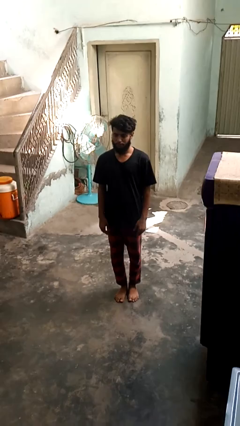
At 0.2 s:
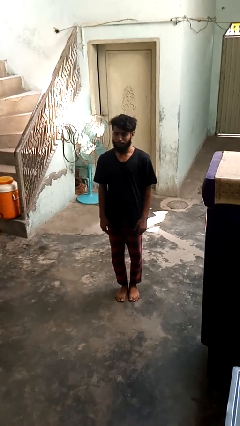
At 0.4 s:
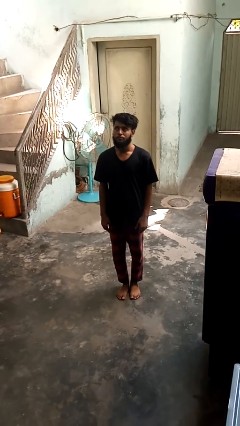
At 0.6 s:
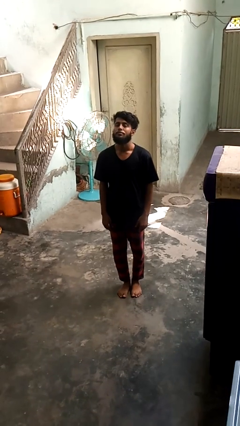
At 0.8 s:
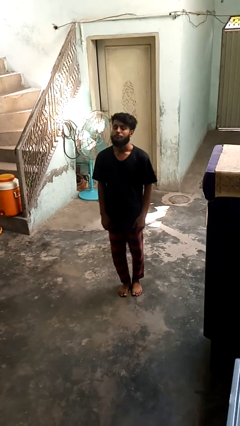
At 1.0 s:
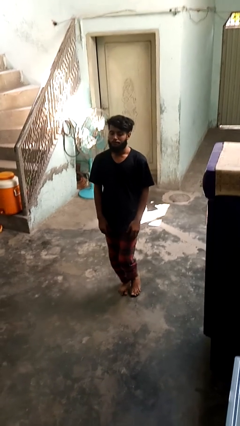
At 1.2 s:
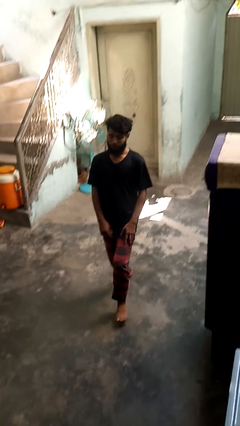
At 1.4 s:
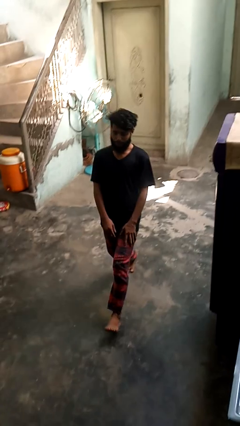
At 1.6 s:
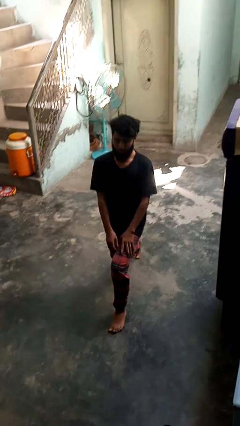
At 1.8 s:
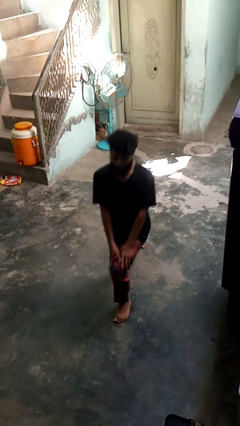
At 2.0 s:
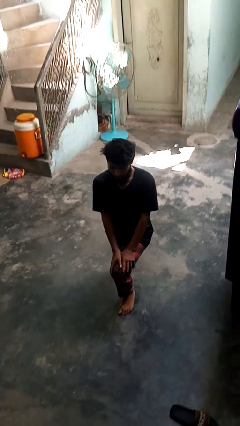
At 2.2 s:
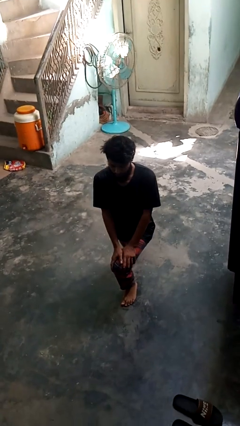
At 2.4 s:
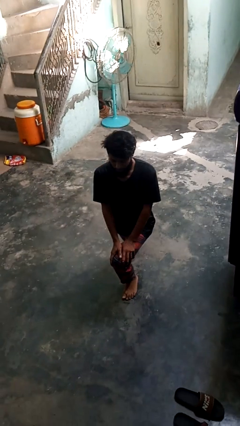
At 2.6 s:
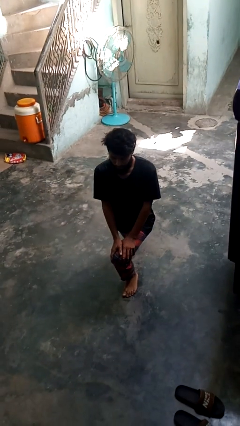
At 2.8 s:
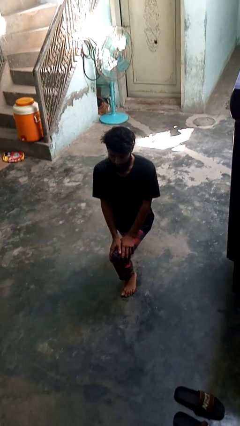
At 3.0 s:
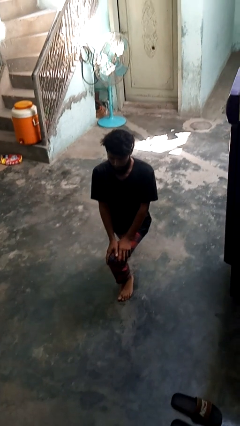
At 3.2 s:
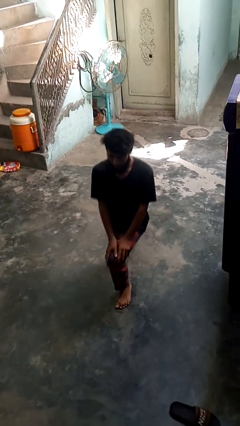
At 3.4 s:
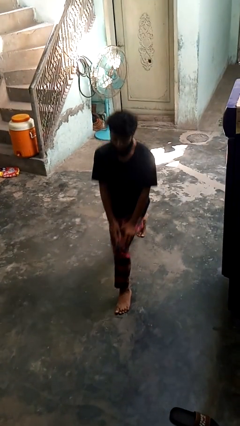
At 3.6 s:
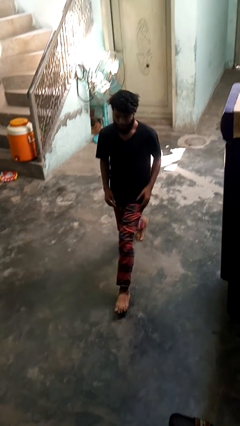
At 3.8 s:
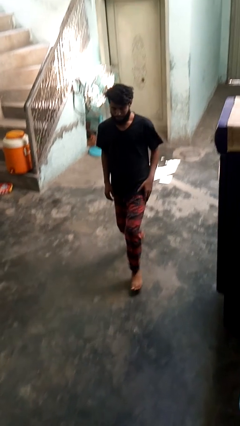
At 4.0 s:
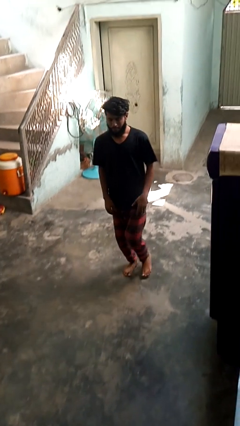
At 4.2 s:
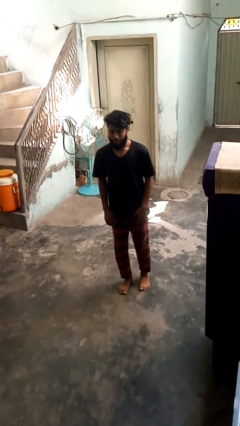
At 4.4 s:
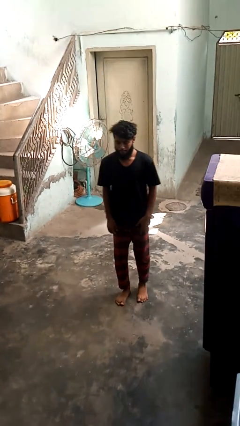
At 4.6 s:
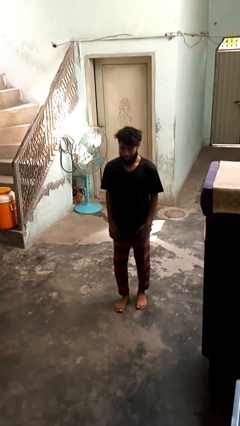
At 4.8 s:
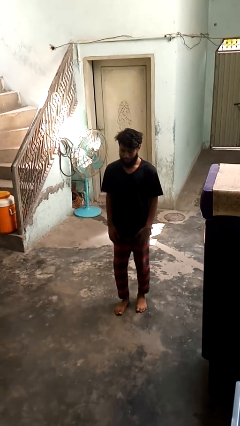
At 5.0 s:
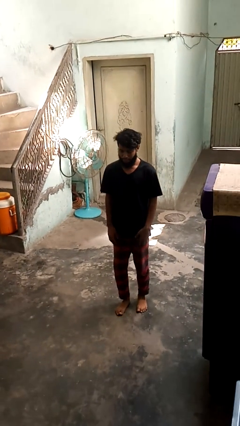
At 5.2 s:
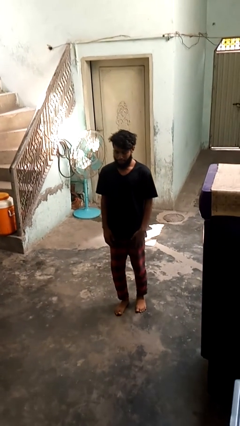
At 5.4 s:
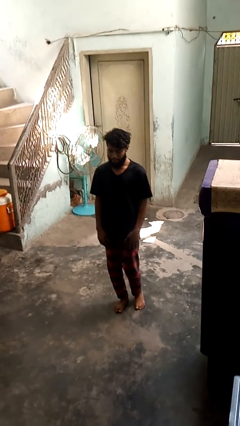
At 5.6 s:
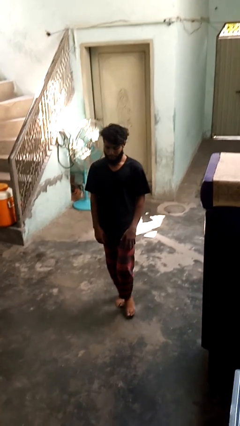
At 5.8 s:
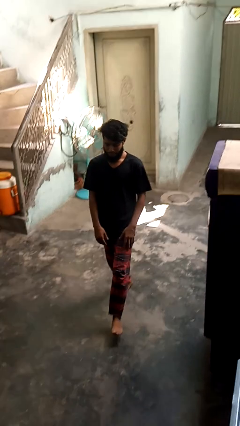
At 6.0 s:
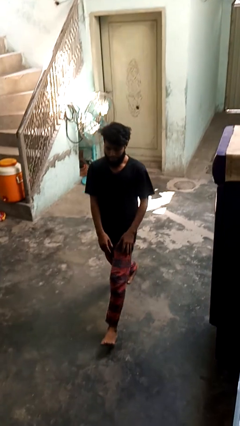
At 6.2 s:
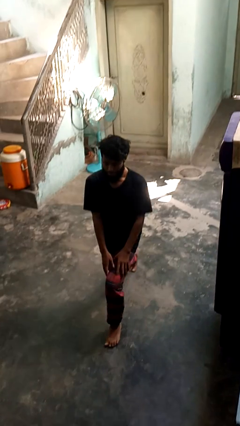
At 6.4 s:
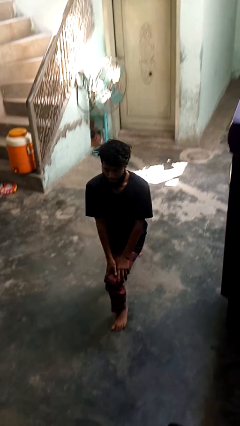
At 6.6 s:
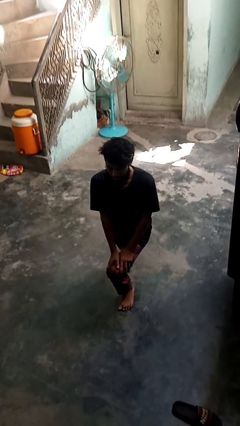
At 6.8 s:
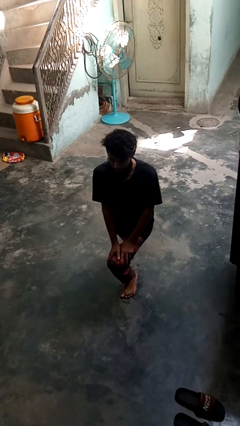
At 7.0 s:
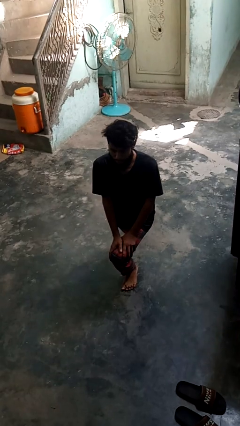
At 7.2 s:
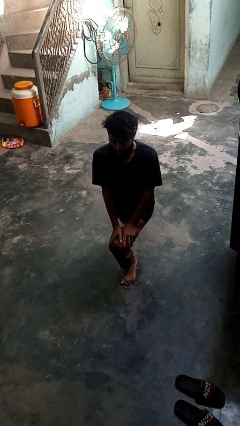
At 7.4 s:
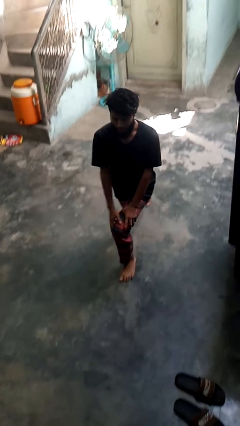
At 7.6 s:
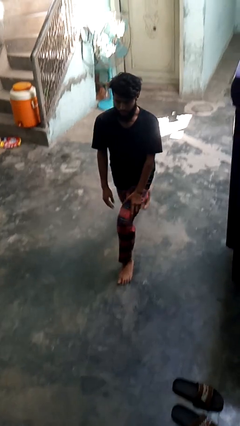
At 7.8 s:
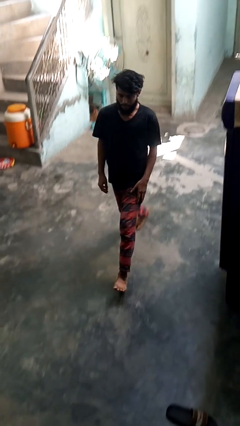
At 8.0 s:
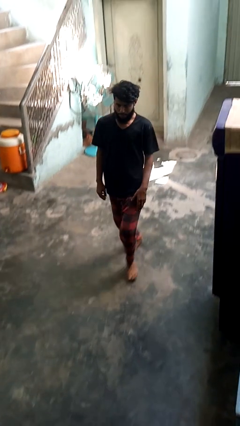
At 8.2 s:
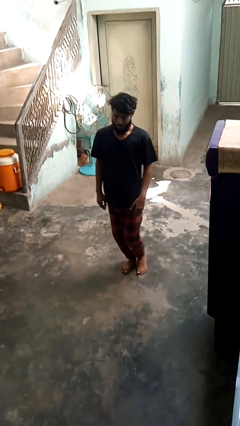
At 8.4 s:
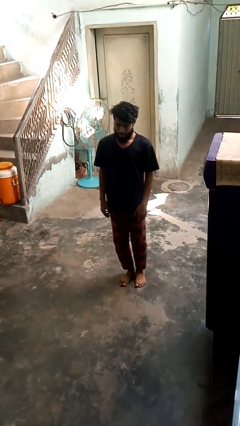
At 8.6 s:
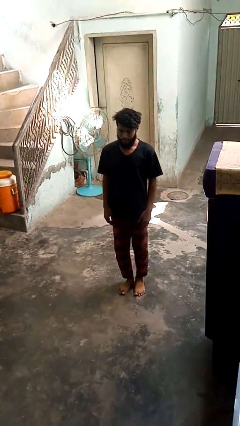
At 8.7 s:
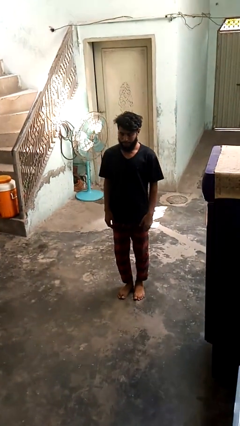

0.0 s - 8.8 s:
person exercises with lunges

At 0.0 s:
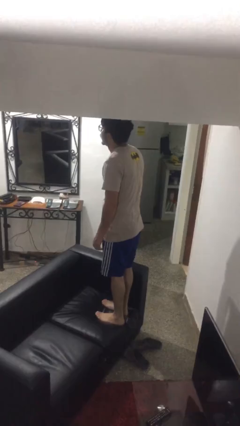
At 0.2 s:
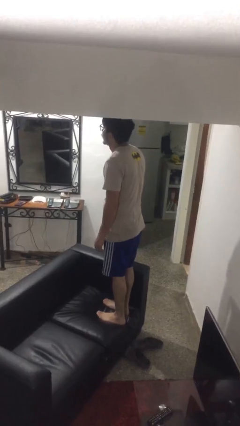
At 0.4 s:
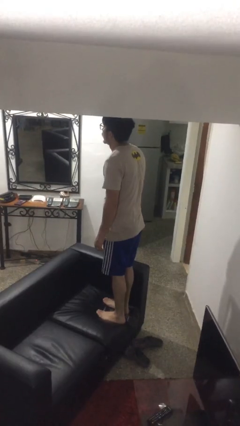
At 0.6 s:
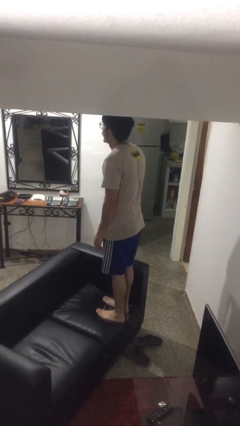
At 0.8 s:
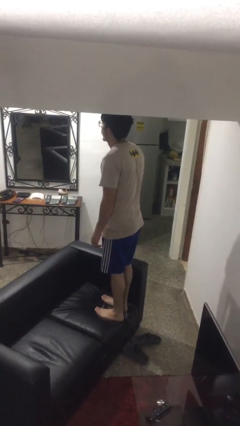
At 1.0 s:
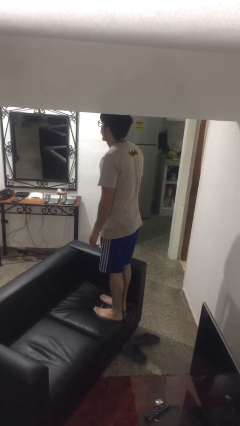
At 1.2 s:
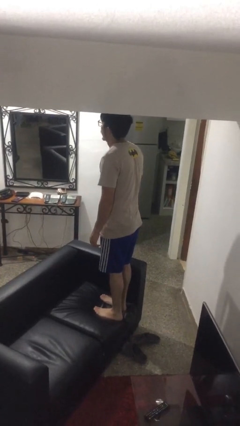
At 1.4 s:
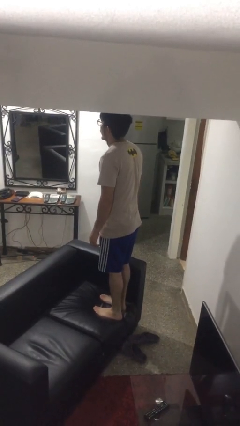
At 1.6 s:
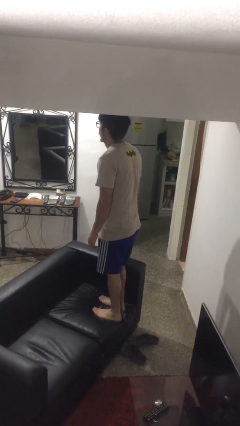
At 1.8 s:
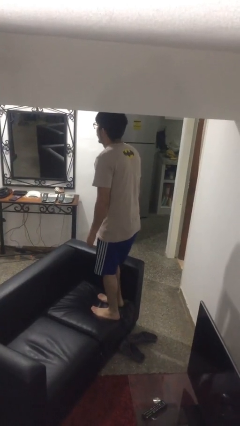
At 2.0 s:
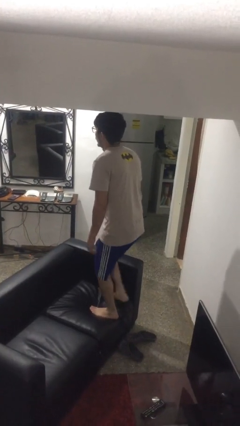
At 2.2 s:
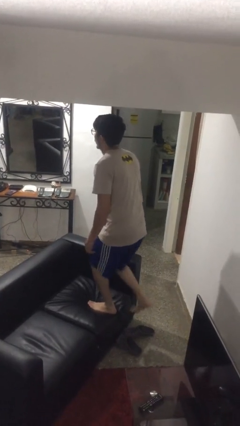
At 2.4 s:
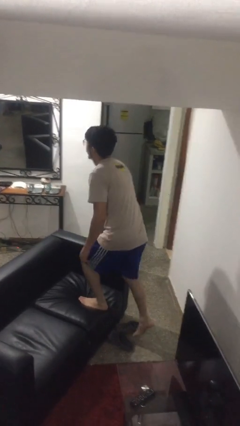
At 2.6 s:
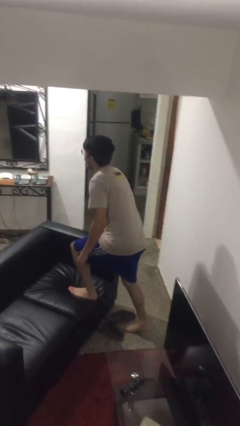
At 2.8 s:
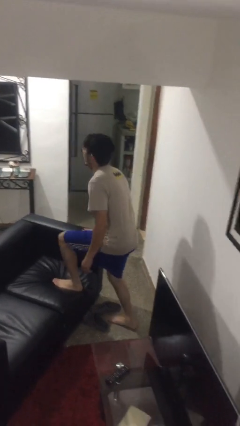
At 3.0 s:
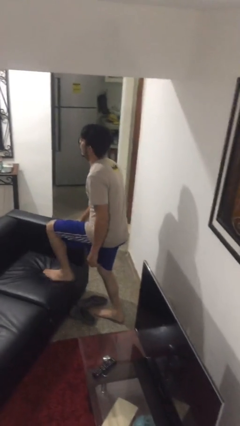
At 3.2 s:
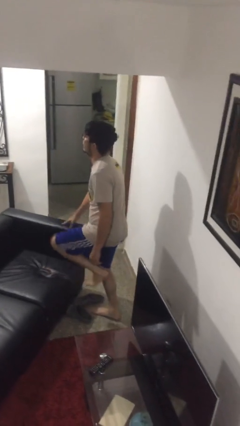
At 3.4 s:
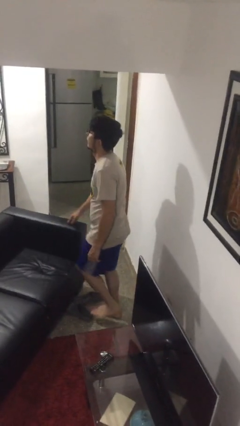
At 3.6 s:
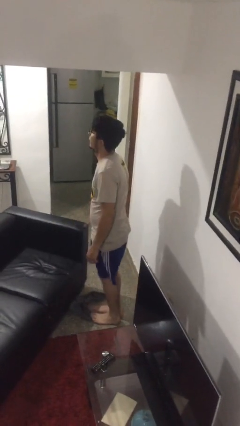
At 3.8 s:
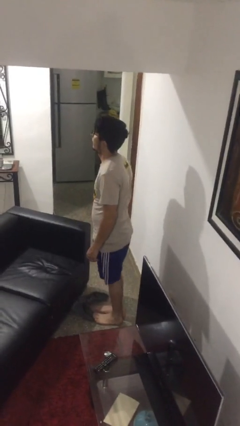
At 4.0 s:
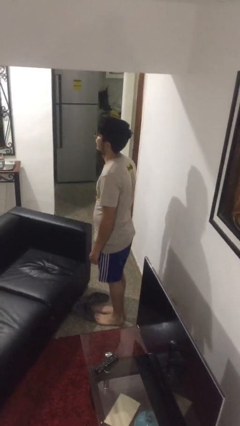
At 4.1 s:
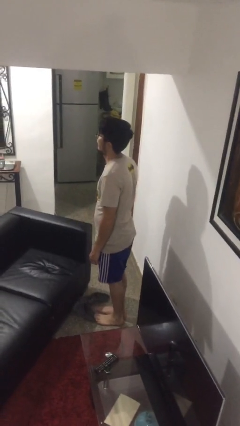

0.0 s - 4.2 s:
person climbs off couch

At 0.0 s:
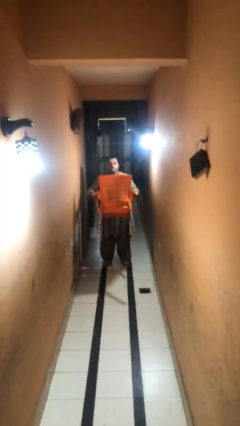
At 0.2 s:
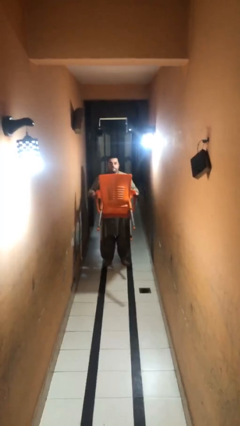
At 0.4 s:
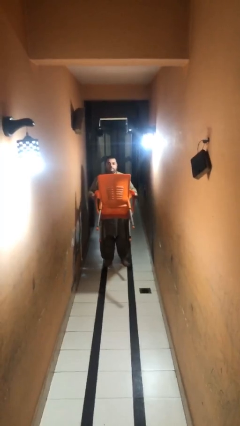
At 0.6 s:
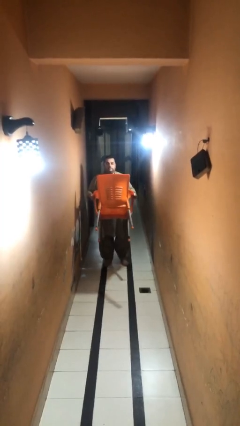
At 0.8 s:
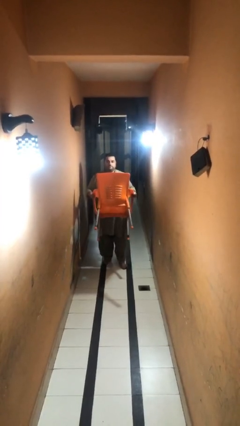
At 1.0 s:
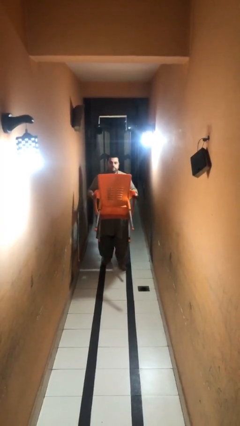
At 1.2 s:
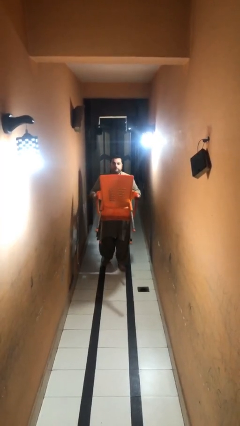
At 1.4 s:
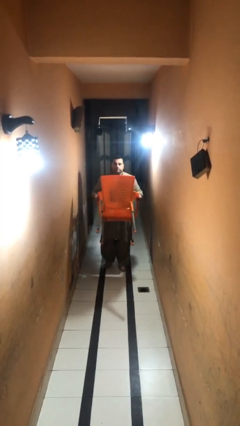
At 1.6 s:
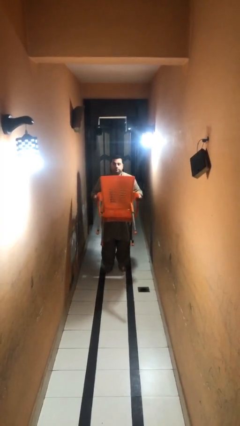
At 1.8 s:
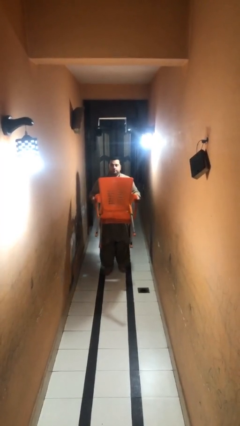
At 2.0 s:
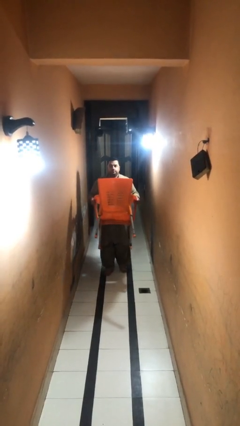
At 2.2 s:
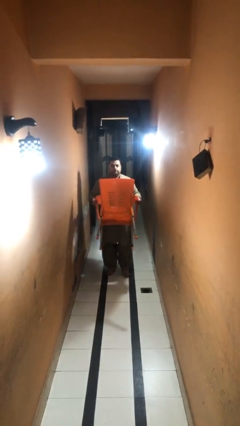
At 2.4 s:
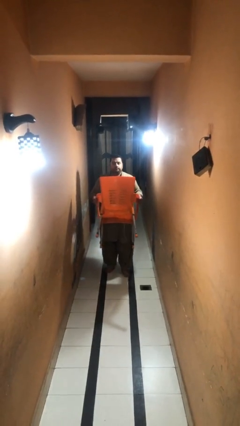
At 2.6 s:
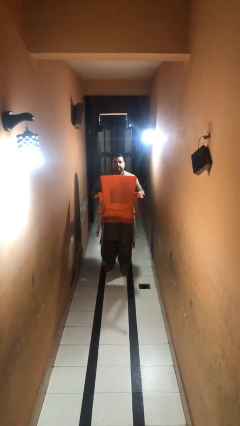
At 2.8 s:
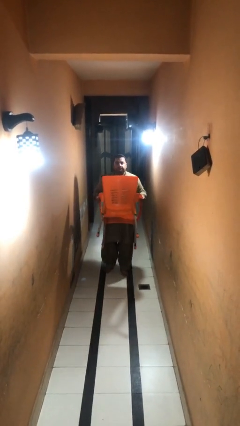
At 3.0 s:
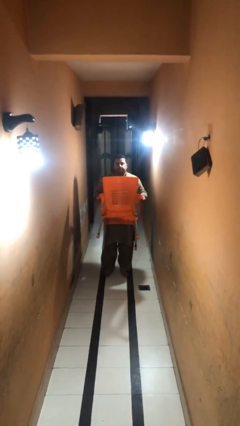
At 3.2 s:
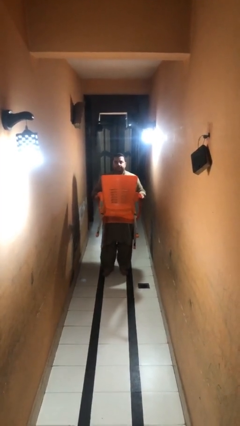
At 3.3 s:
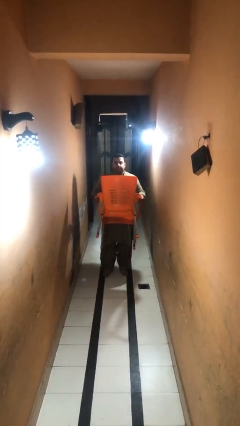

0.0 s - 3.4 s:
person carries furniture

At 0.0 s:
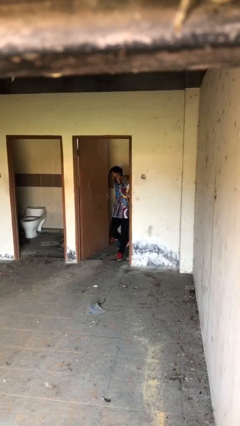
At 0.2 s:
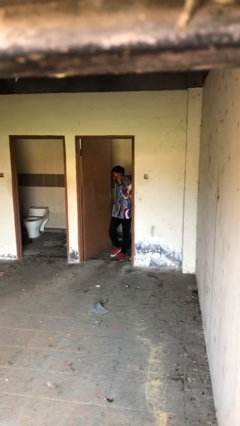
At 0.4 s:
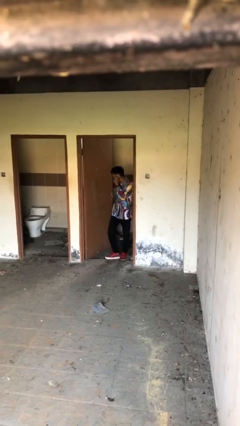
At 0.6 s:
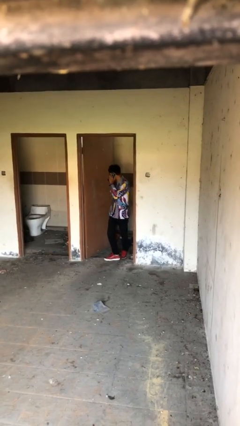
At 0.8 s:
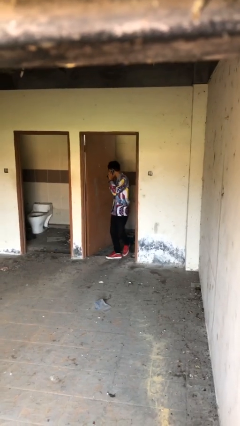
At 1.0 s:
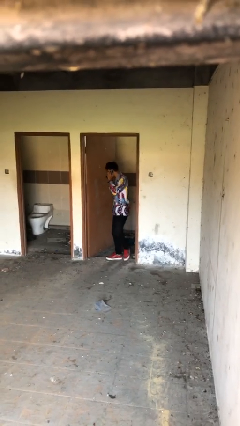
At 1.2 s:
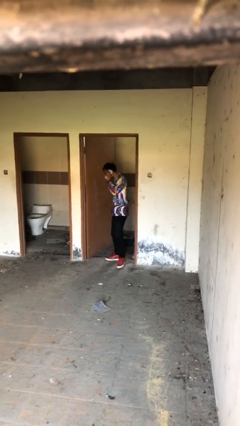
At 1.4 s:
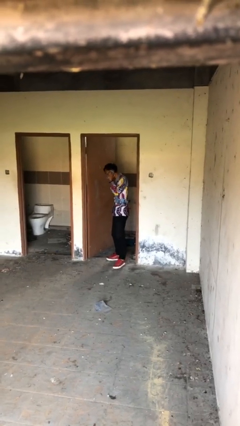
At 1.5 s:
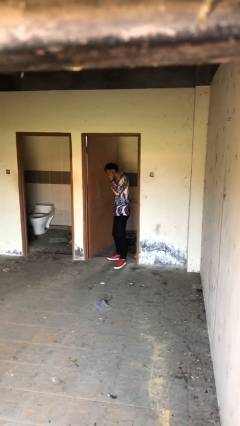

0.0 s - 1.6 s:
person enters scene through structure
